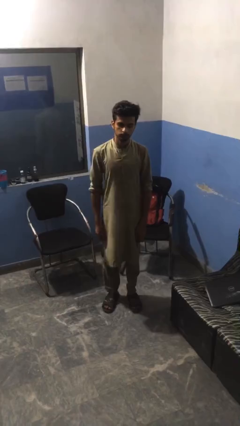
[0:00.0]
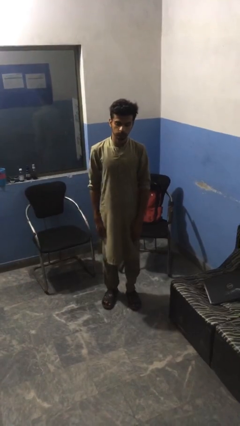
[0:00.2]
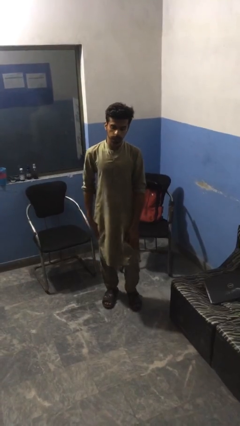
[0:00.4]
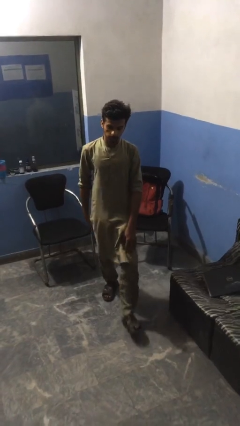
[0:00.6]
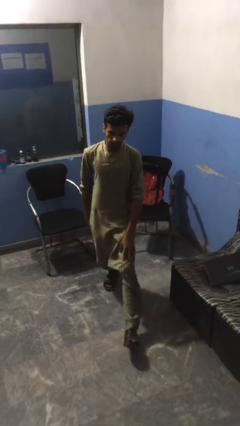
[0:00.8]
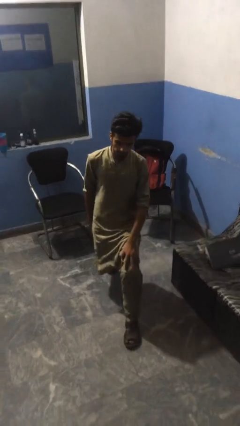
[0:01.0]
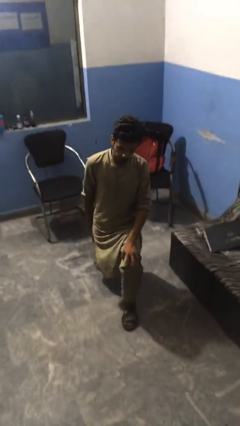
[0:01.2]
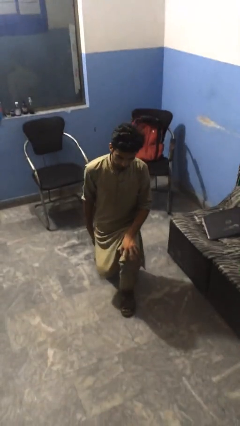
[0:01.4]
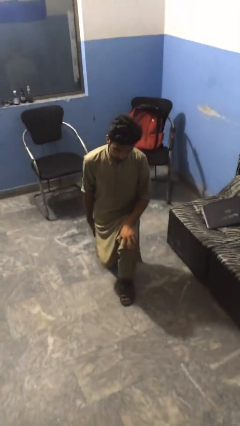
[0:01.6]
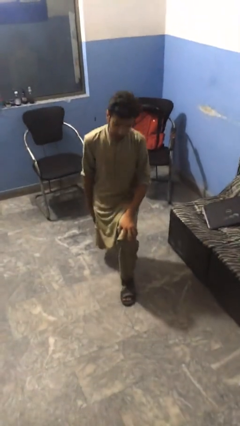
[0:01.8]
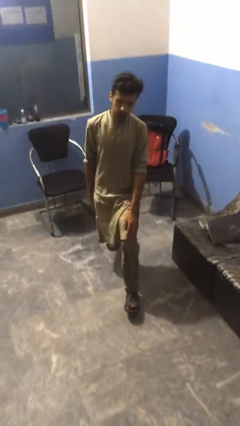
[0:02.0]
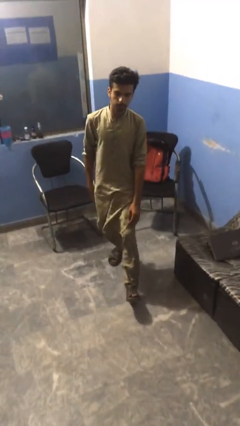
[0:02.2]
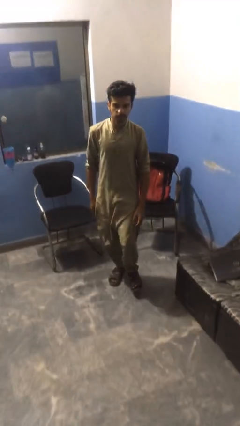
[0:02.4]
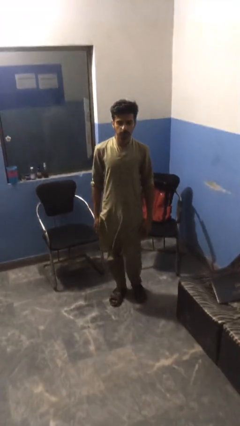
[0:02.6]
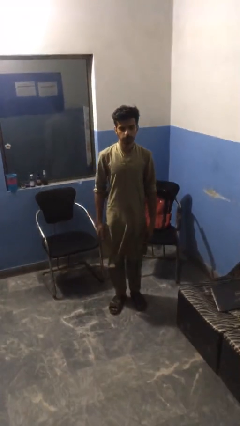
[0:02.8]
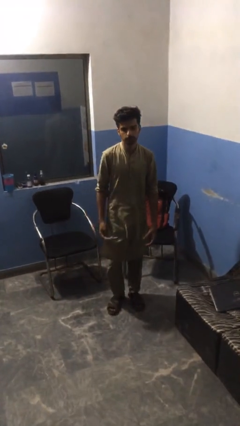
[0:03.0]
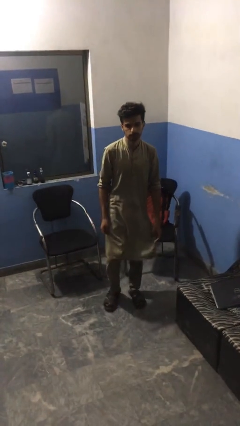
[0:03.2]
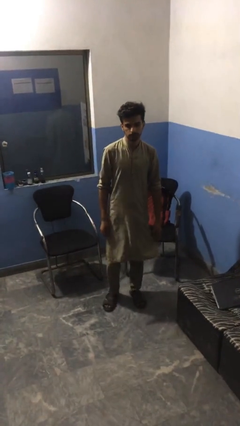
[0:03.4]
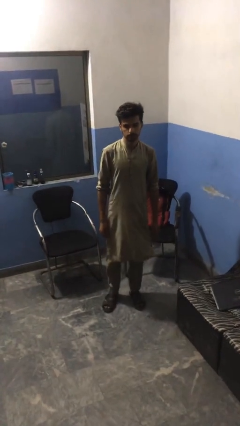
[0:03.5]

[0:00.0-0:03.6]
person exercises with lunges

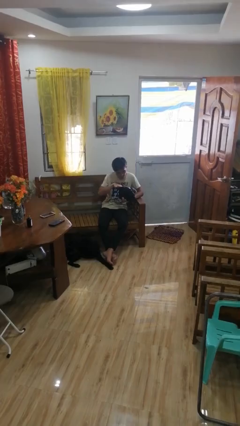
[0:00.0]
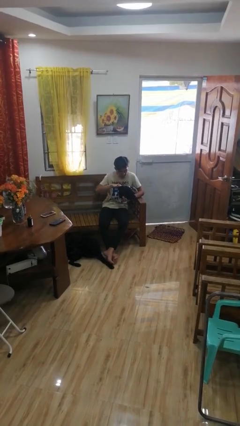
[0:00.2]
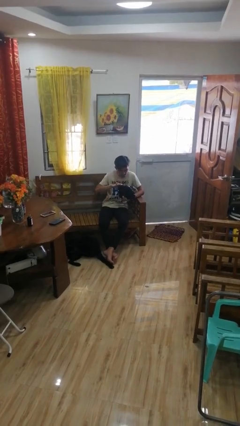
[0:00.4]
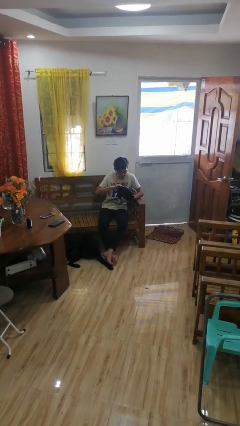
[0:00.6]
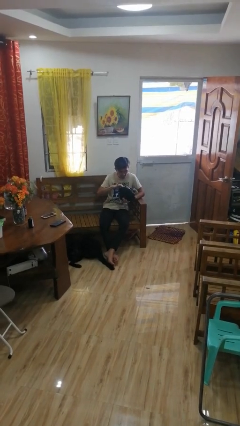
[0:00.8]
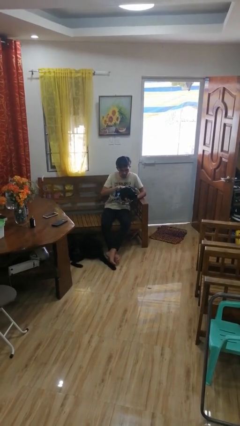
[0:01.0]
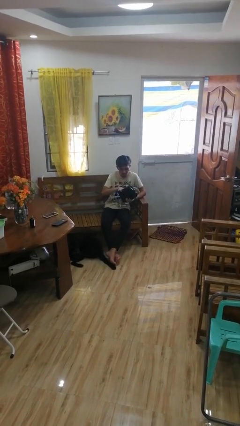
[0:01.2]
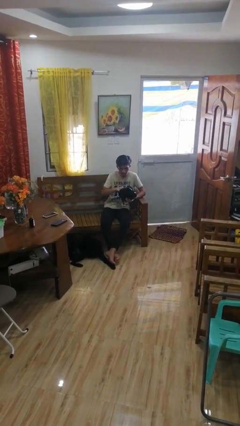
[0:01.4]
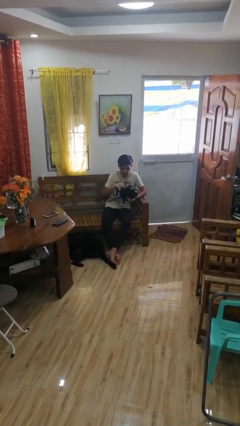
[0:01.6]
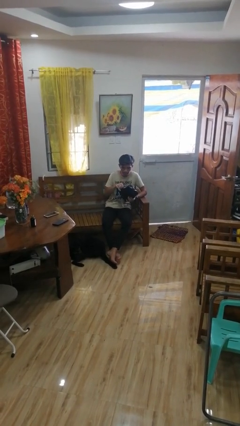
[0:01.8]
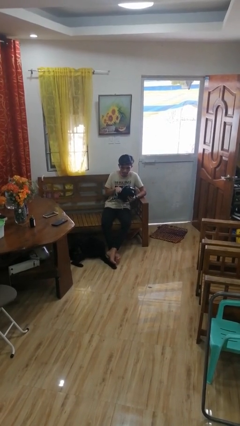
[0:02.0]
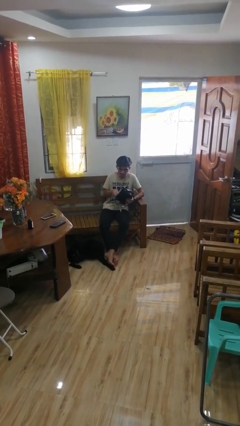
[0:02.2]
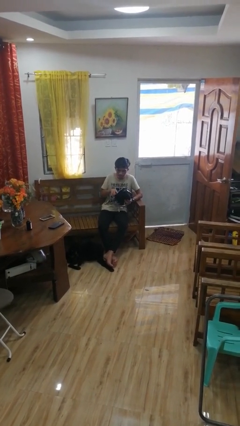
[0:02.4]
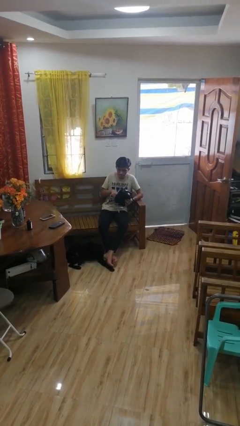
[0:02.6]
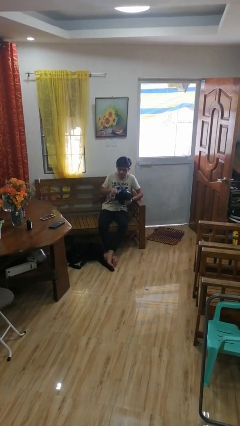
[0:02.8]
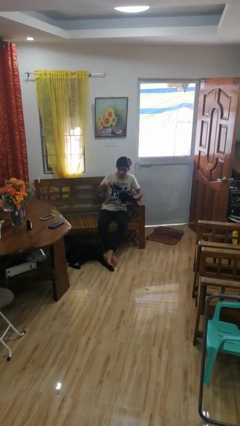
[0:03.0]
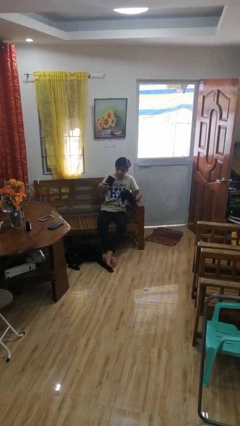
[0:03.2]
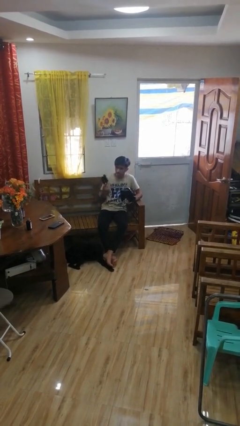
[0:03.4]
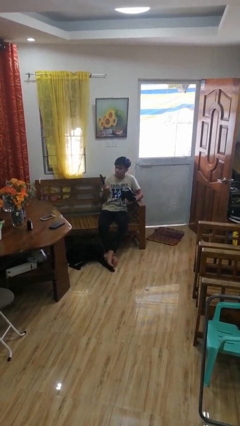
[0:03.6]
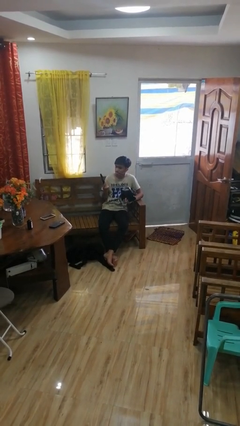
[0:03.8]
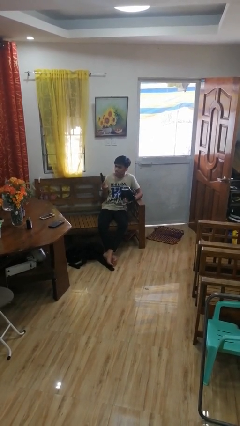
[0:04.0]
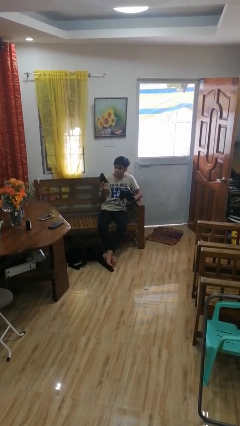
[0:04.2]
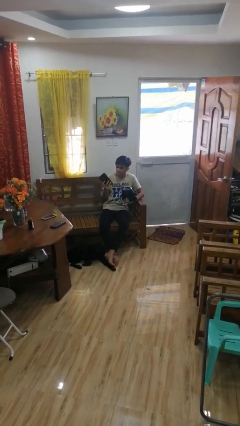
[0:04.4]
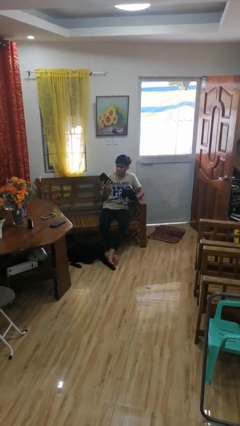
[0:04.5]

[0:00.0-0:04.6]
person takes object from purse

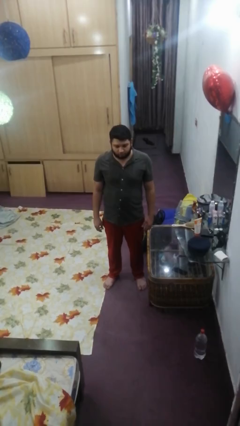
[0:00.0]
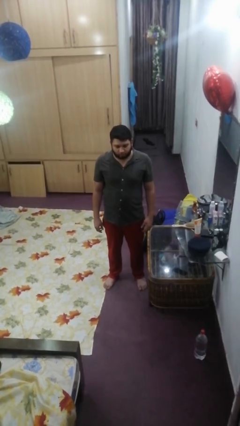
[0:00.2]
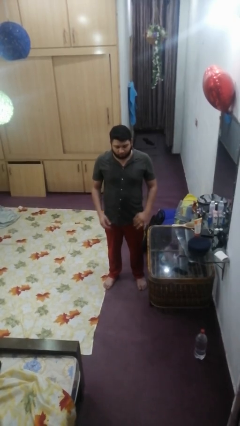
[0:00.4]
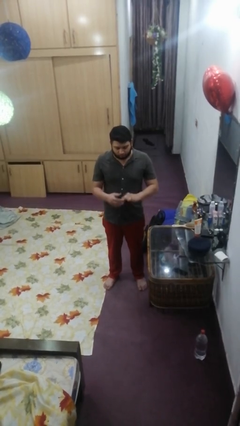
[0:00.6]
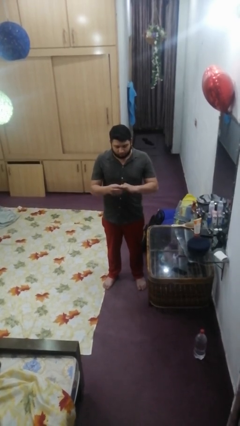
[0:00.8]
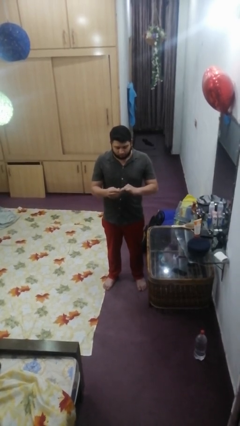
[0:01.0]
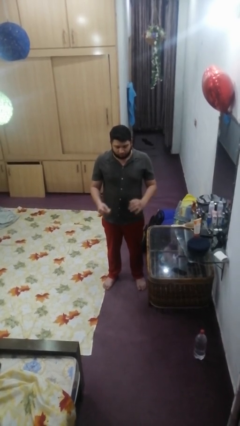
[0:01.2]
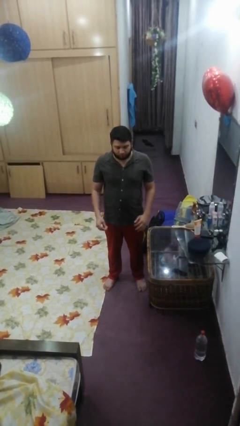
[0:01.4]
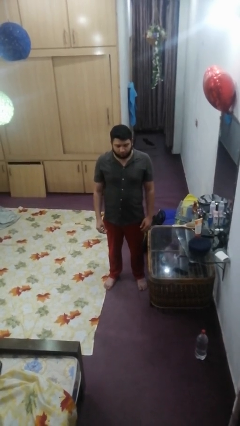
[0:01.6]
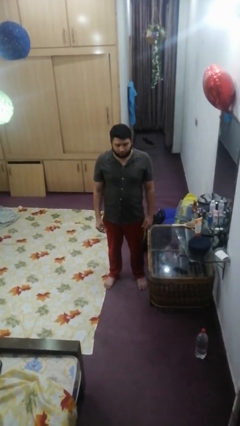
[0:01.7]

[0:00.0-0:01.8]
person takes off ring

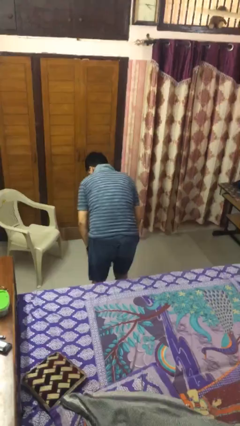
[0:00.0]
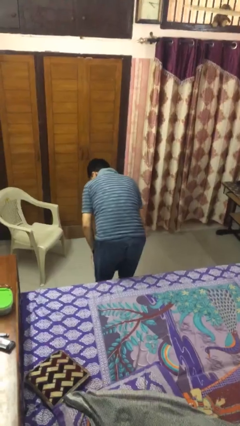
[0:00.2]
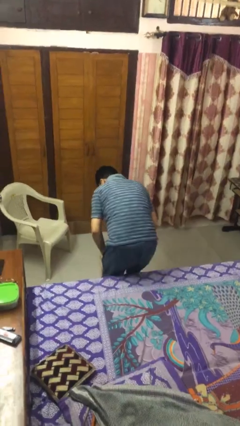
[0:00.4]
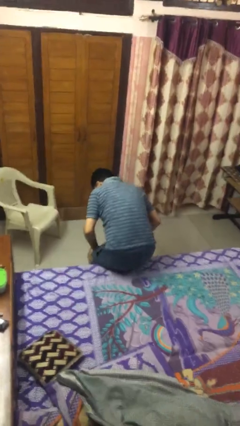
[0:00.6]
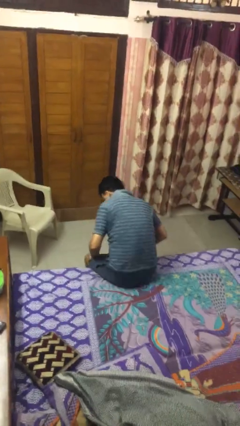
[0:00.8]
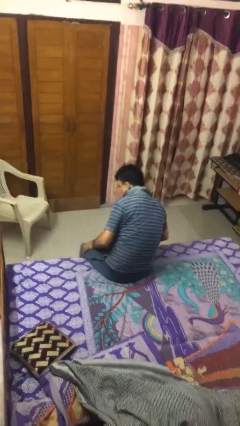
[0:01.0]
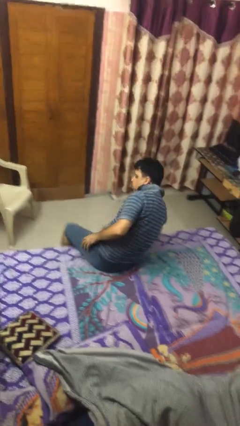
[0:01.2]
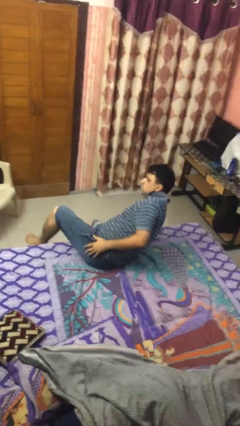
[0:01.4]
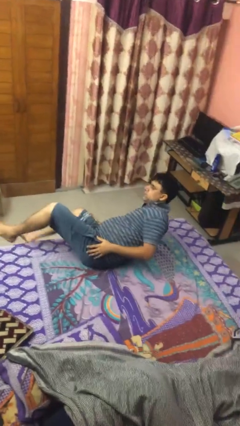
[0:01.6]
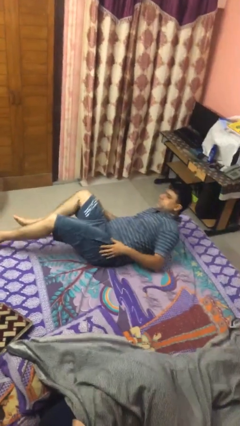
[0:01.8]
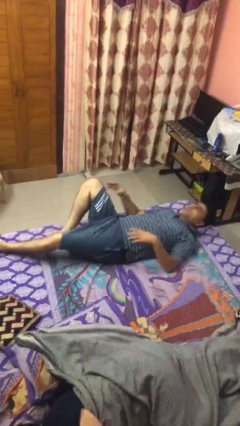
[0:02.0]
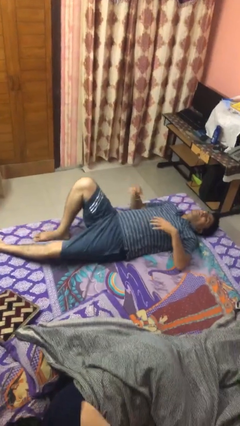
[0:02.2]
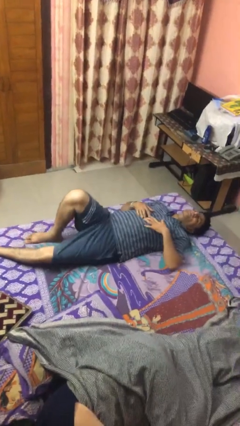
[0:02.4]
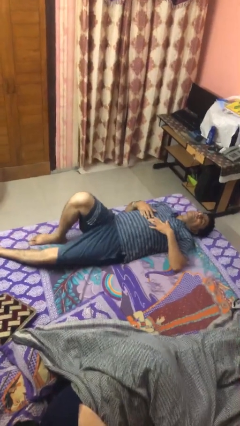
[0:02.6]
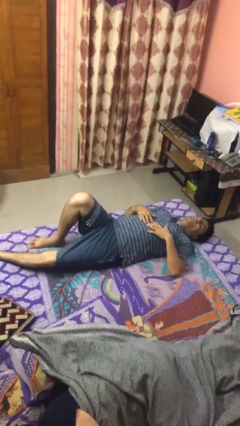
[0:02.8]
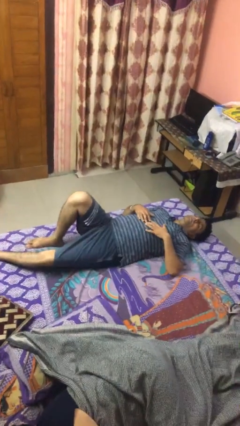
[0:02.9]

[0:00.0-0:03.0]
person lies down on bed

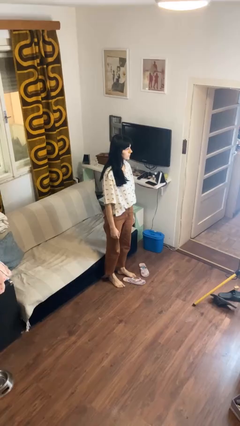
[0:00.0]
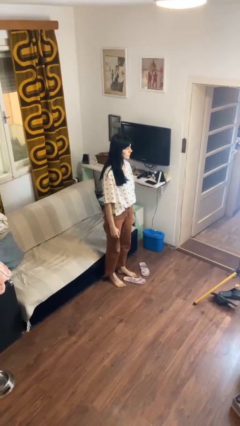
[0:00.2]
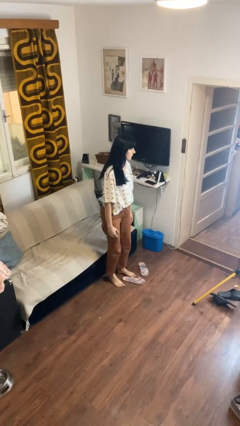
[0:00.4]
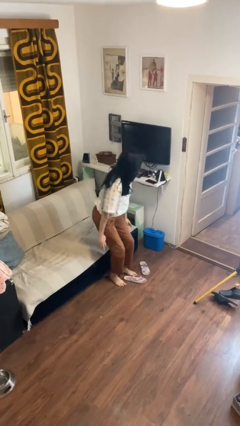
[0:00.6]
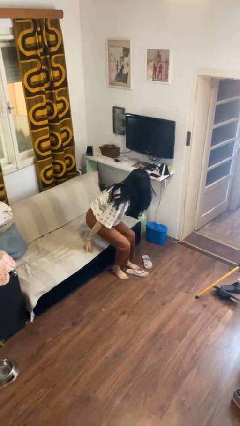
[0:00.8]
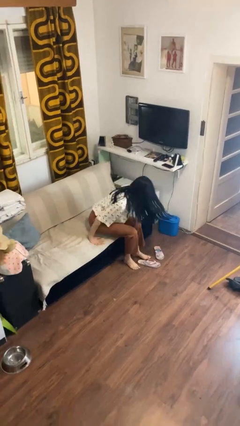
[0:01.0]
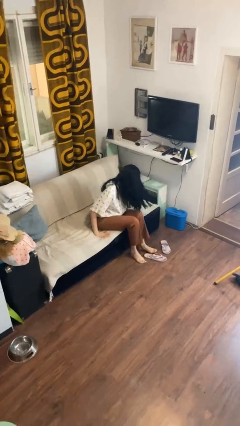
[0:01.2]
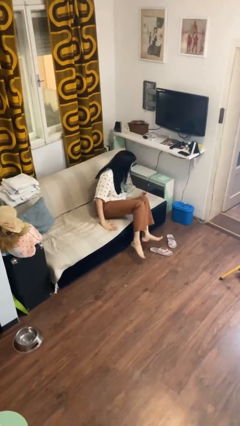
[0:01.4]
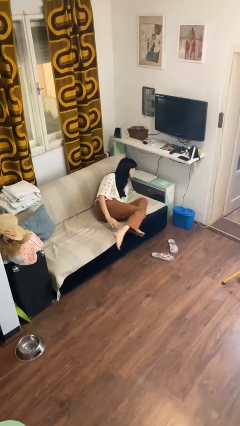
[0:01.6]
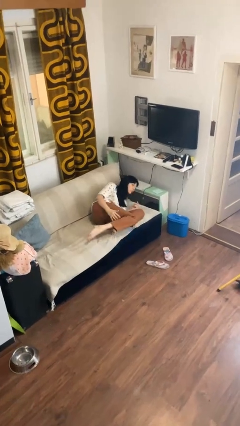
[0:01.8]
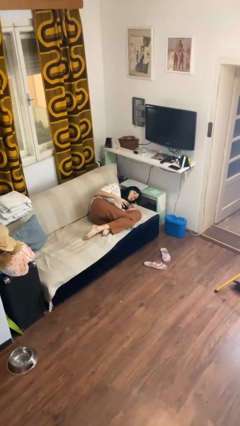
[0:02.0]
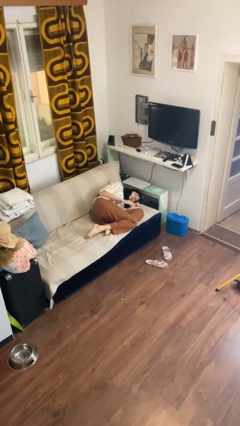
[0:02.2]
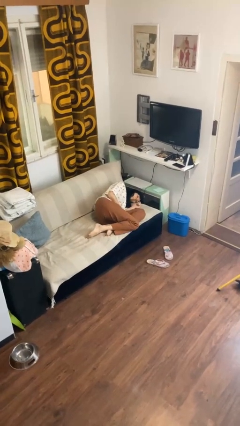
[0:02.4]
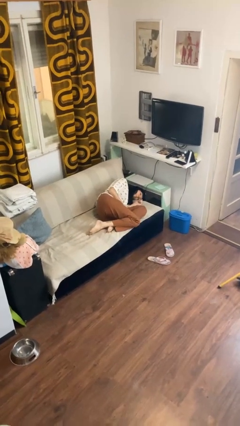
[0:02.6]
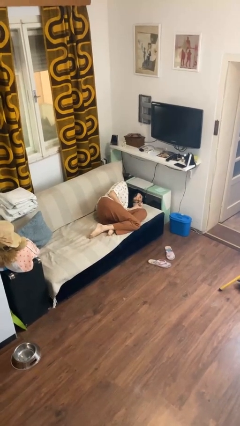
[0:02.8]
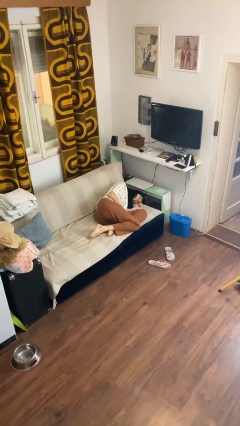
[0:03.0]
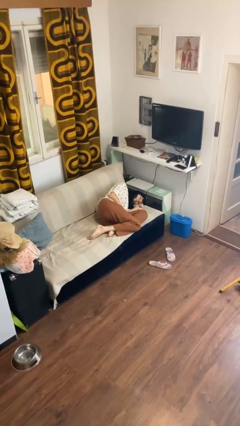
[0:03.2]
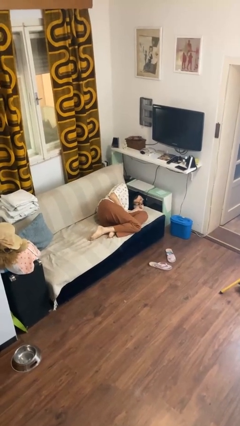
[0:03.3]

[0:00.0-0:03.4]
person lies down on couch

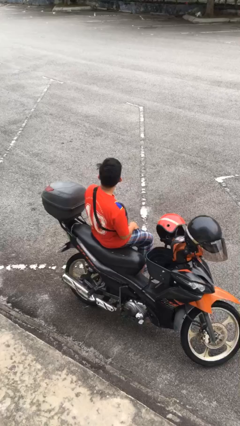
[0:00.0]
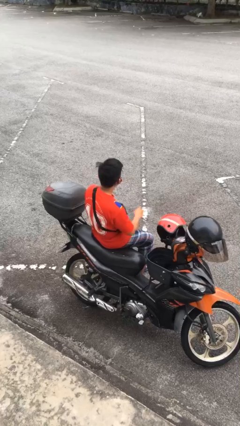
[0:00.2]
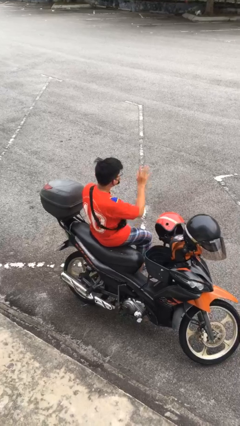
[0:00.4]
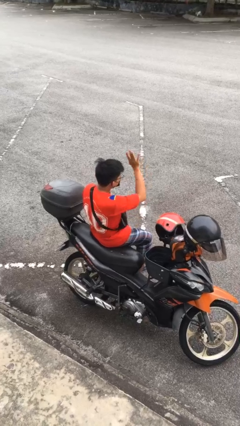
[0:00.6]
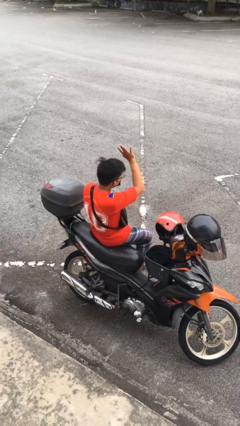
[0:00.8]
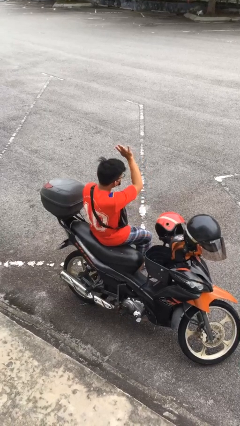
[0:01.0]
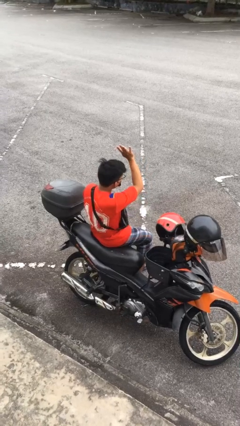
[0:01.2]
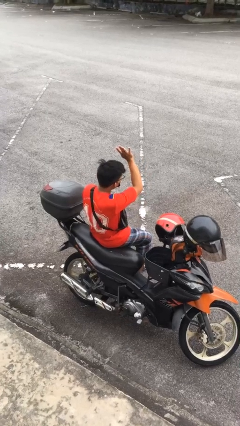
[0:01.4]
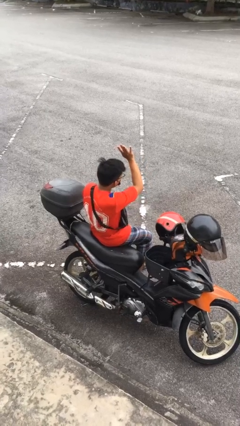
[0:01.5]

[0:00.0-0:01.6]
person gestures raise hand
